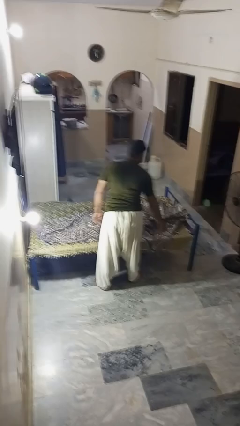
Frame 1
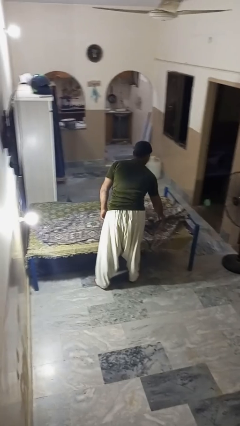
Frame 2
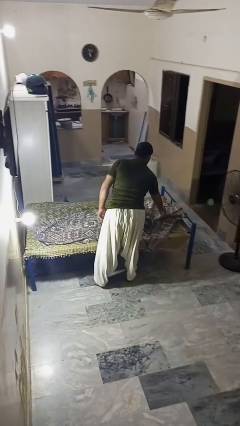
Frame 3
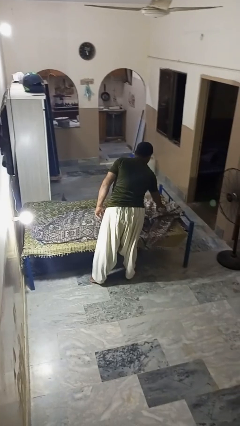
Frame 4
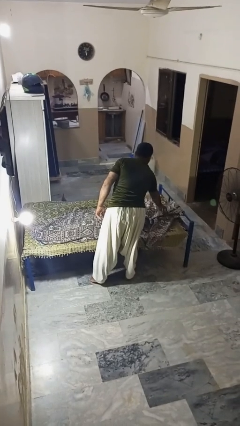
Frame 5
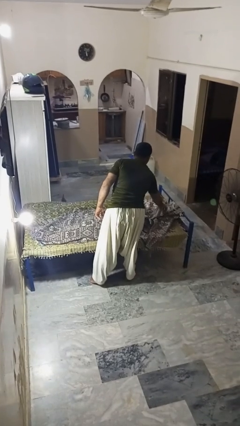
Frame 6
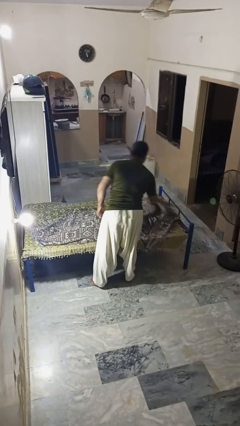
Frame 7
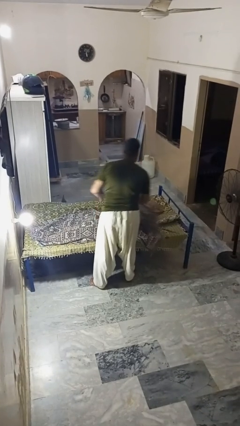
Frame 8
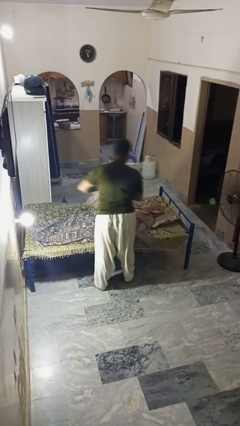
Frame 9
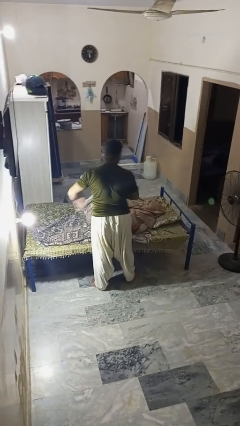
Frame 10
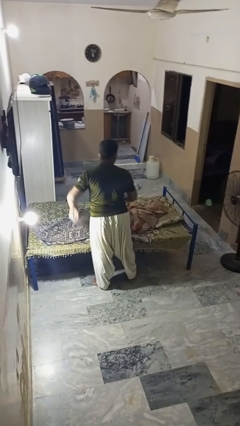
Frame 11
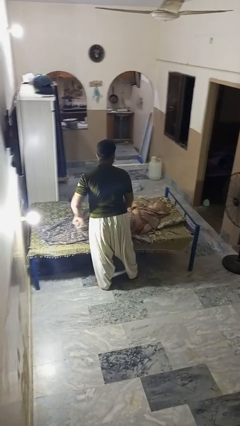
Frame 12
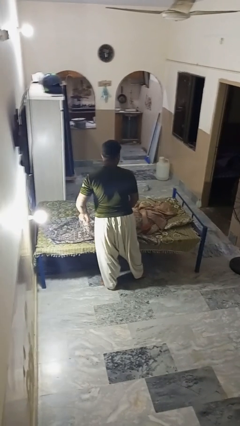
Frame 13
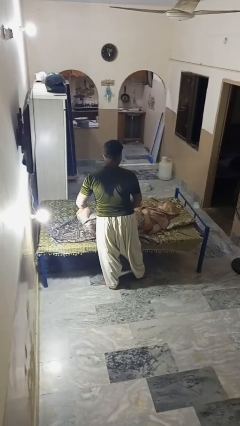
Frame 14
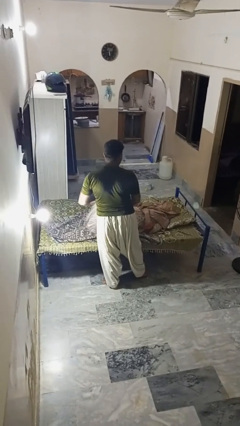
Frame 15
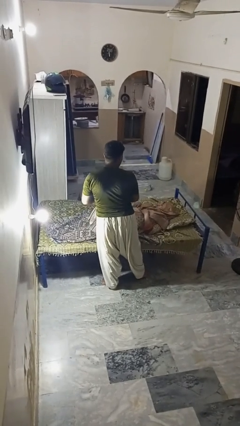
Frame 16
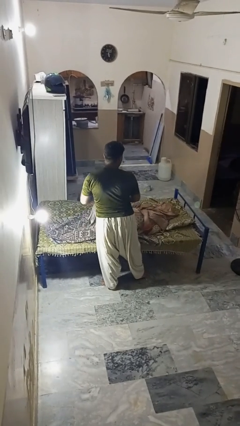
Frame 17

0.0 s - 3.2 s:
person uncovers friend with blanket

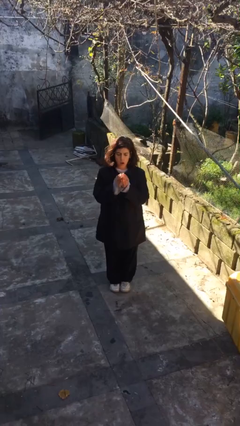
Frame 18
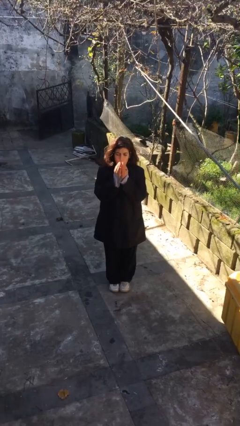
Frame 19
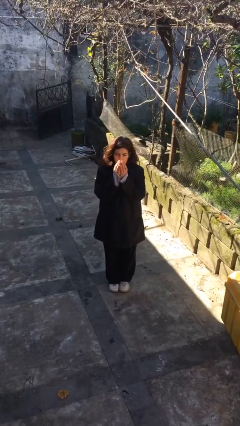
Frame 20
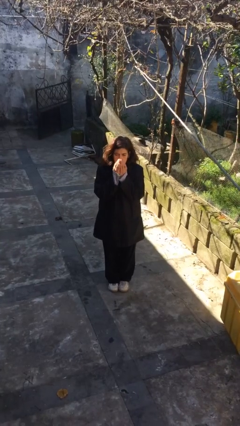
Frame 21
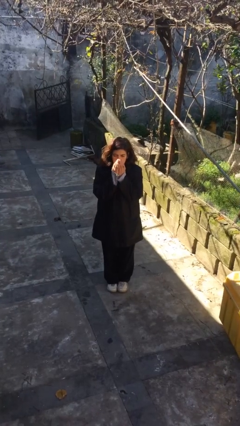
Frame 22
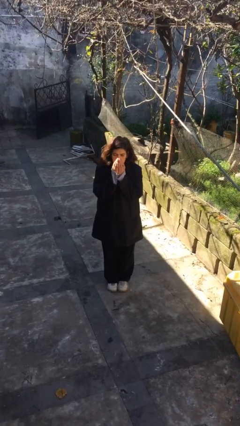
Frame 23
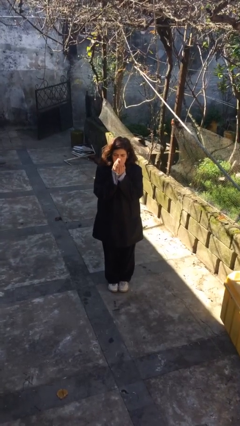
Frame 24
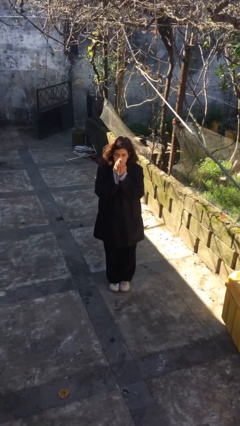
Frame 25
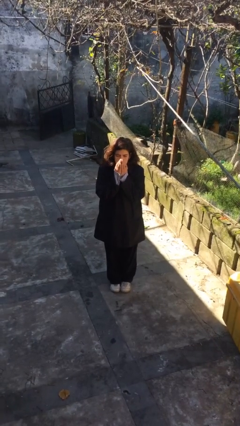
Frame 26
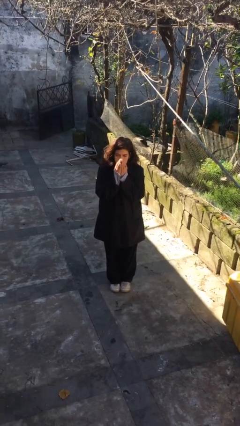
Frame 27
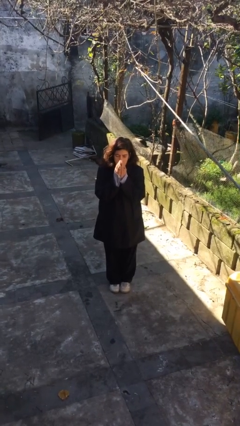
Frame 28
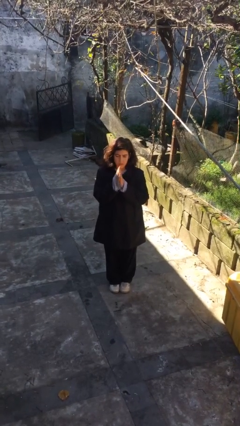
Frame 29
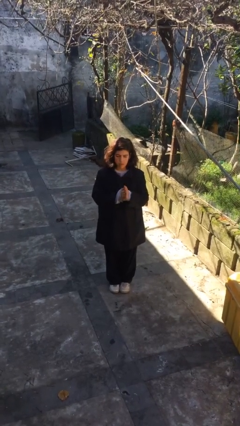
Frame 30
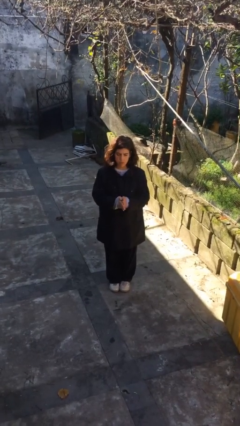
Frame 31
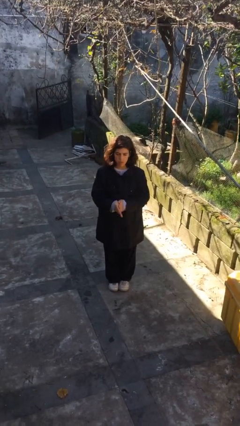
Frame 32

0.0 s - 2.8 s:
person blows into hands

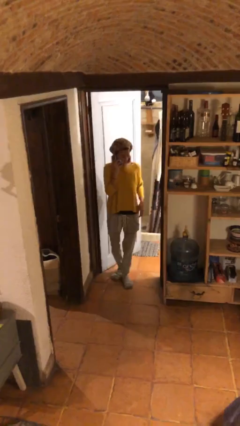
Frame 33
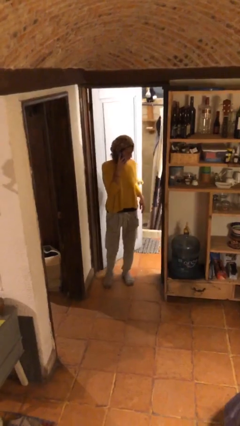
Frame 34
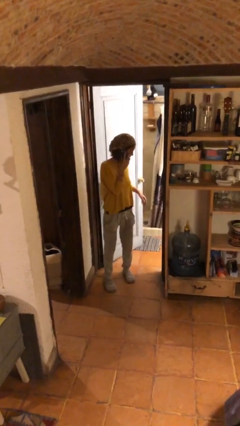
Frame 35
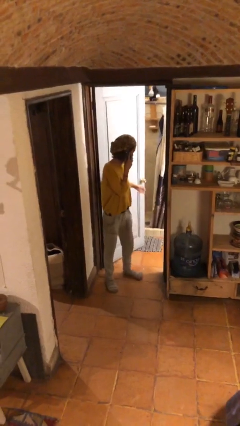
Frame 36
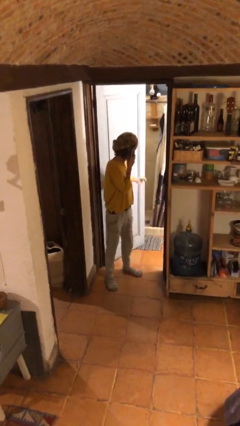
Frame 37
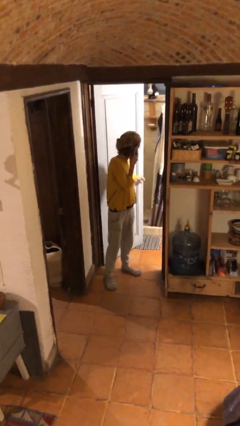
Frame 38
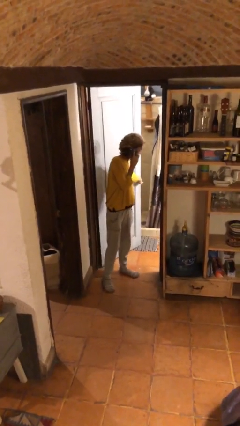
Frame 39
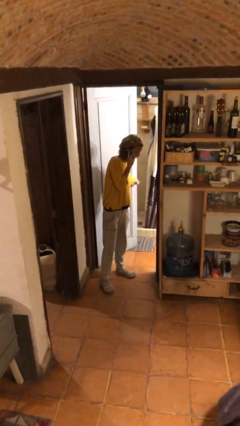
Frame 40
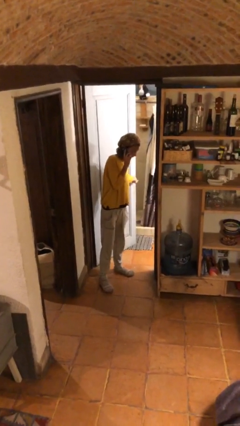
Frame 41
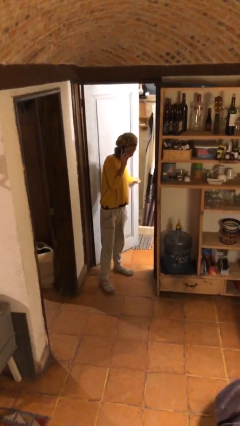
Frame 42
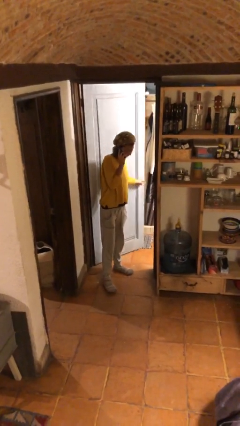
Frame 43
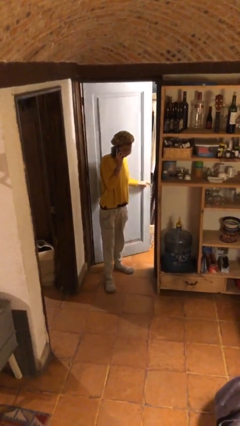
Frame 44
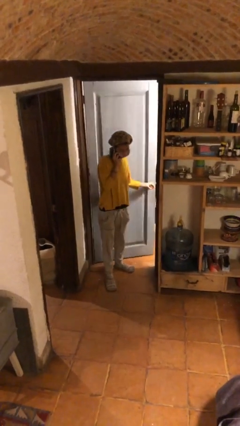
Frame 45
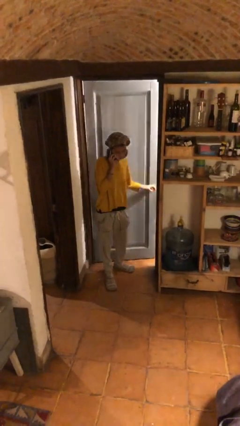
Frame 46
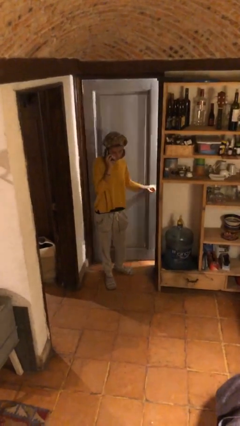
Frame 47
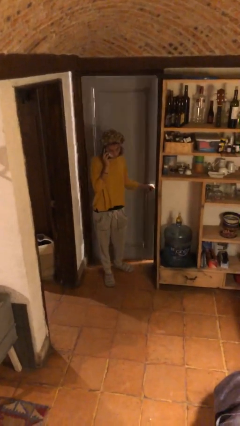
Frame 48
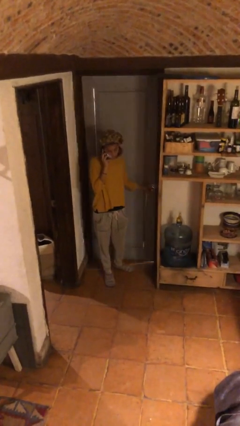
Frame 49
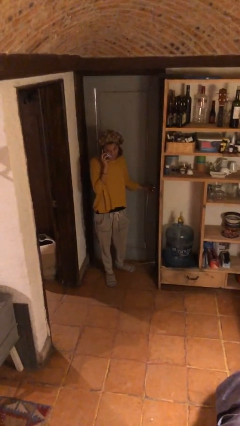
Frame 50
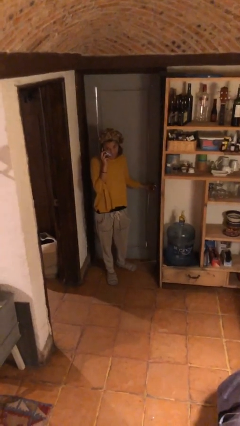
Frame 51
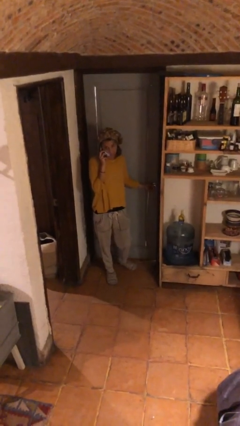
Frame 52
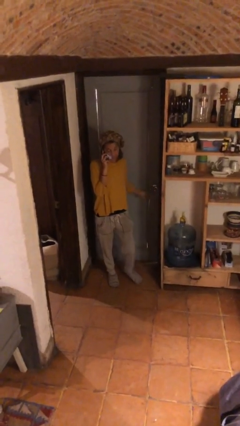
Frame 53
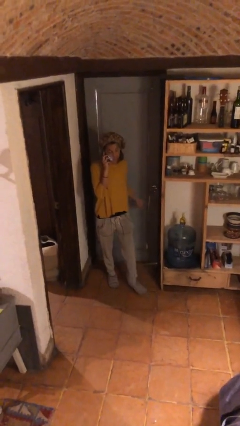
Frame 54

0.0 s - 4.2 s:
person closes facility door

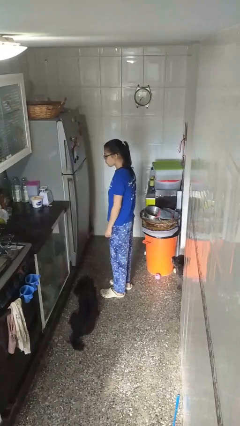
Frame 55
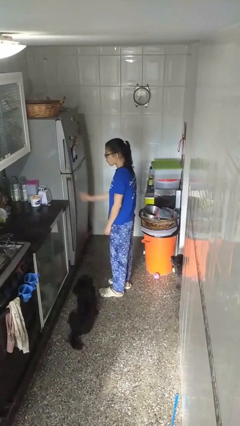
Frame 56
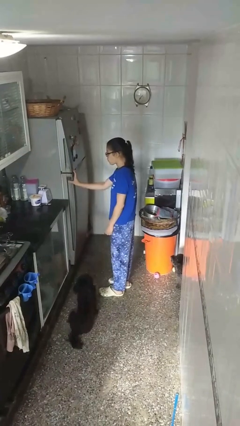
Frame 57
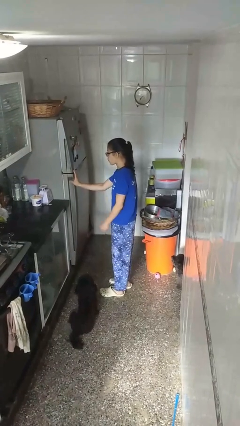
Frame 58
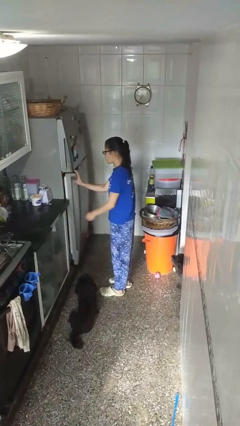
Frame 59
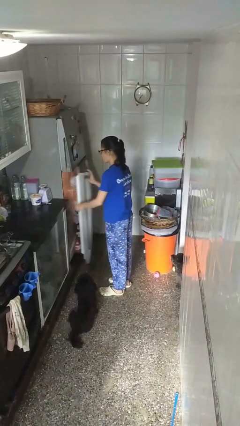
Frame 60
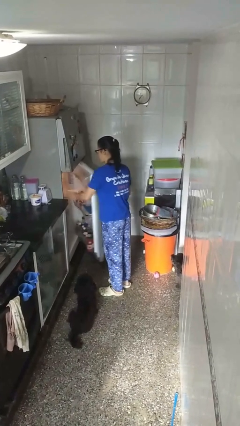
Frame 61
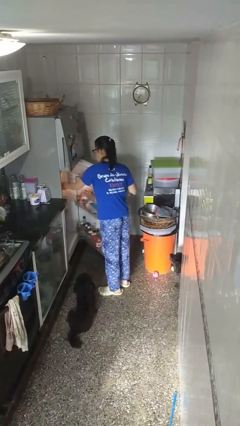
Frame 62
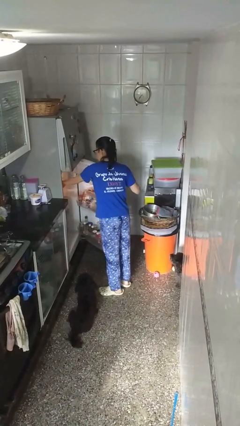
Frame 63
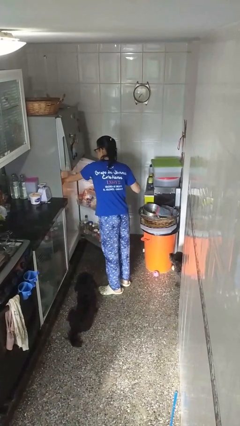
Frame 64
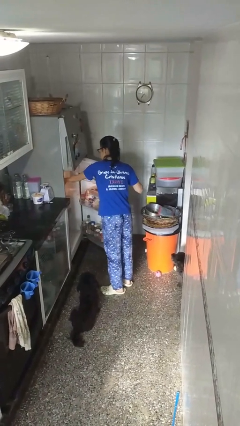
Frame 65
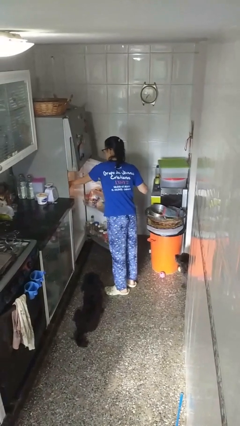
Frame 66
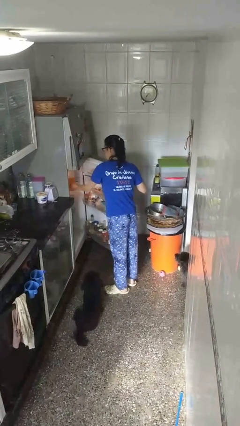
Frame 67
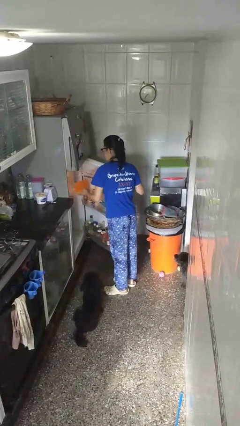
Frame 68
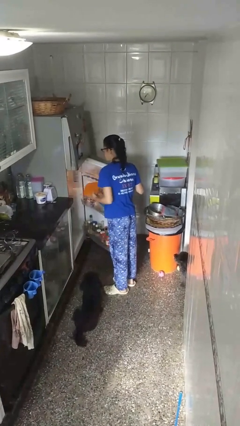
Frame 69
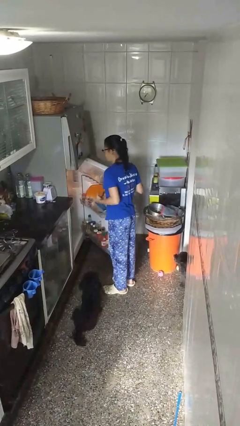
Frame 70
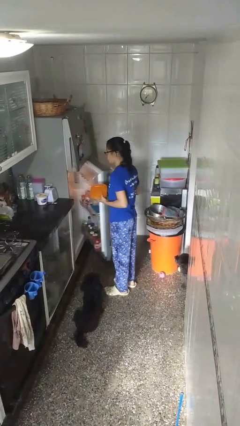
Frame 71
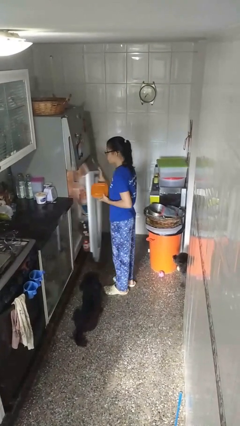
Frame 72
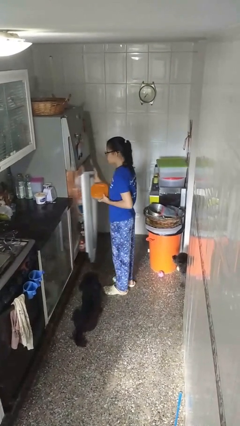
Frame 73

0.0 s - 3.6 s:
person takes object from refrigerator

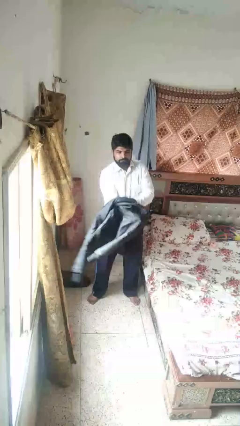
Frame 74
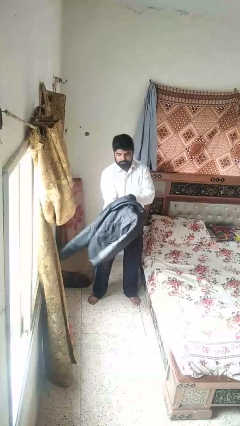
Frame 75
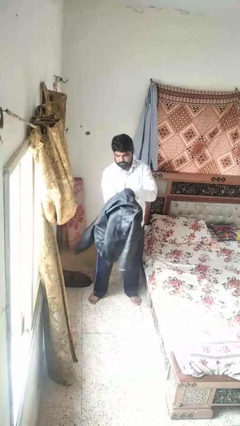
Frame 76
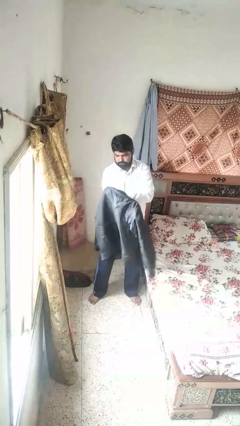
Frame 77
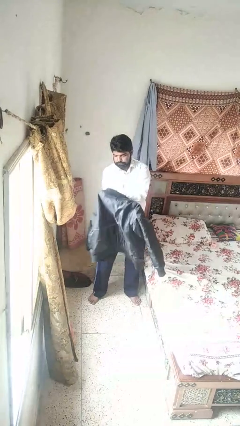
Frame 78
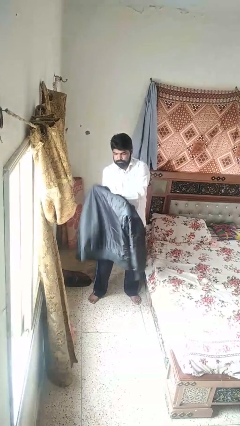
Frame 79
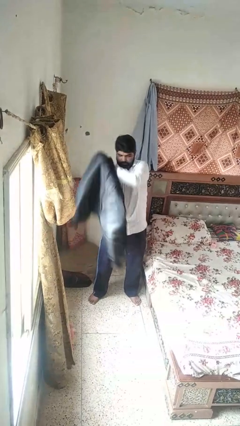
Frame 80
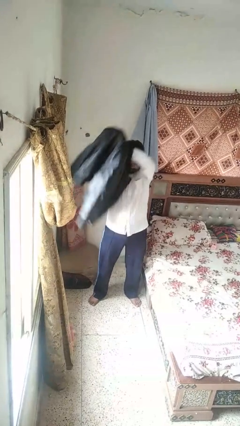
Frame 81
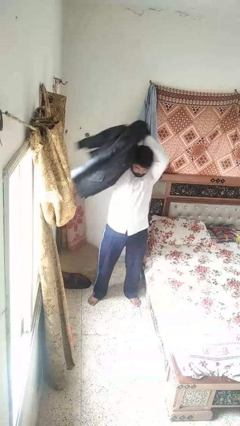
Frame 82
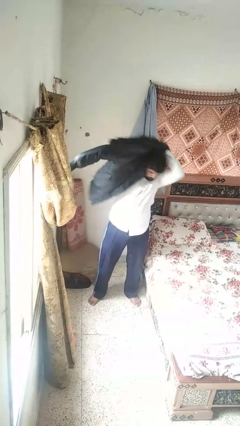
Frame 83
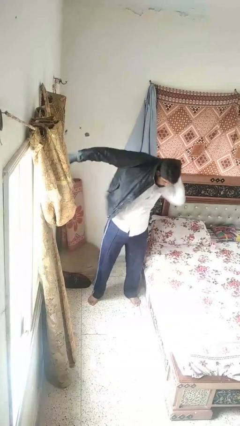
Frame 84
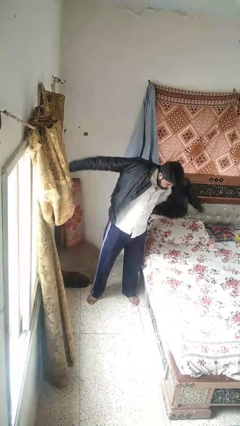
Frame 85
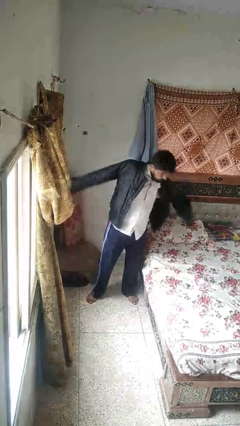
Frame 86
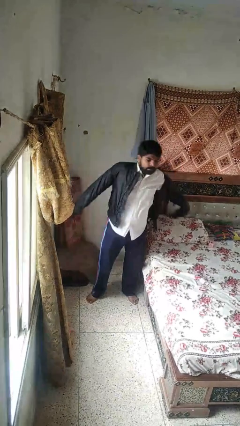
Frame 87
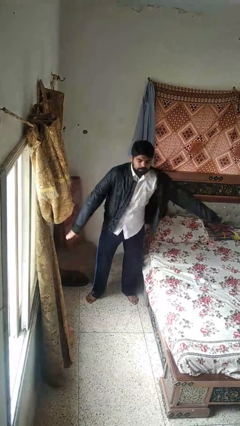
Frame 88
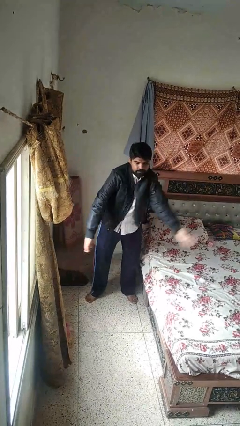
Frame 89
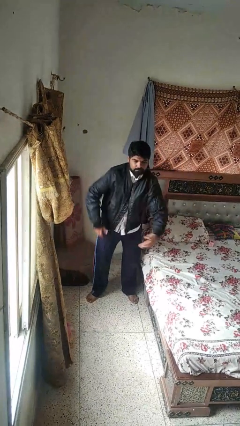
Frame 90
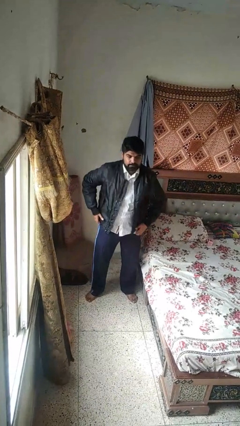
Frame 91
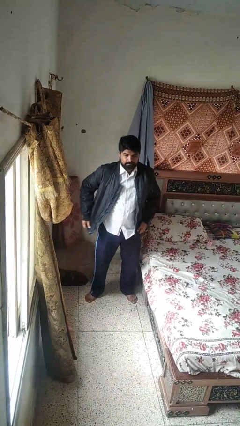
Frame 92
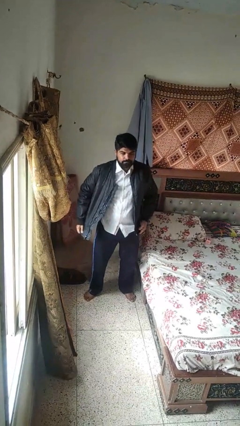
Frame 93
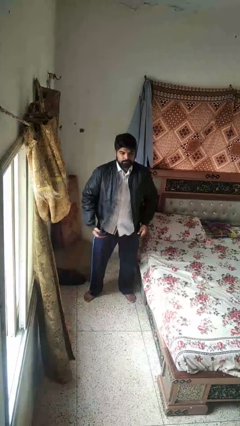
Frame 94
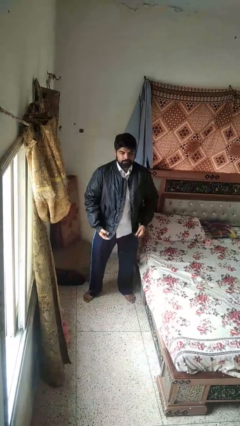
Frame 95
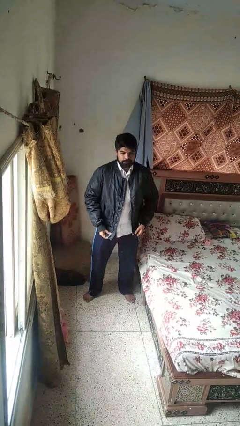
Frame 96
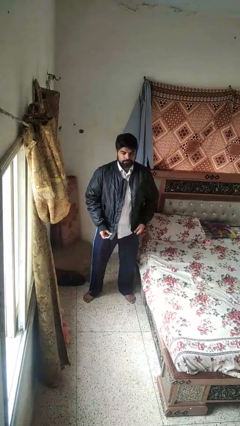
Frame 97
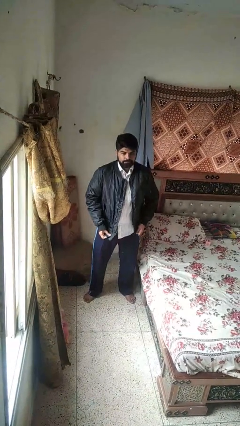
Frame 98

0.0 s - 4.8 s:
person puts on jacket
